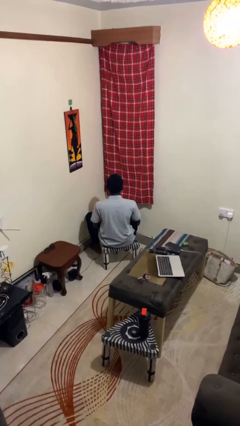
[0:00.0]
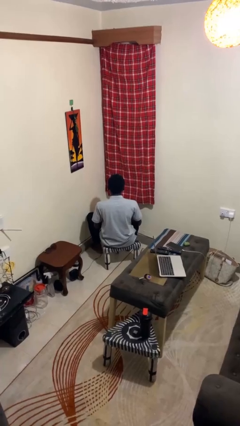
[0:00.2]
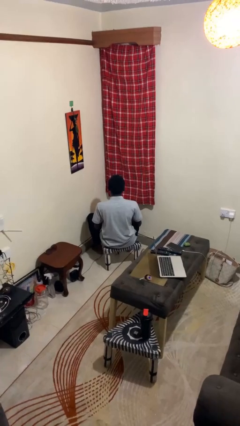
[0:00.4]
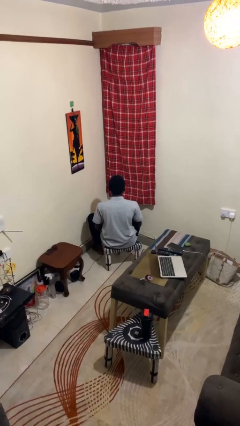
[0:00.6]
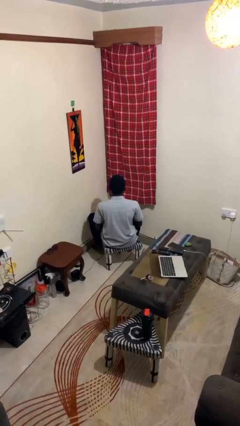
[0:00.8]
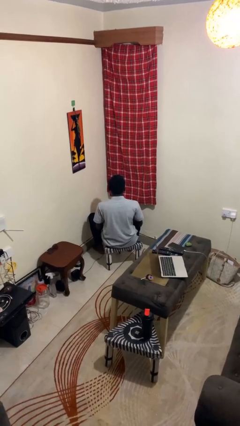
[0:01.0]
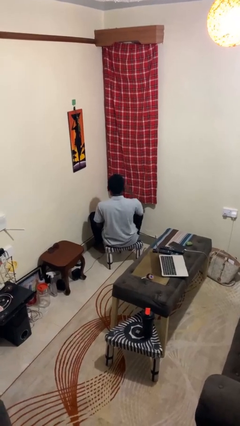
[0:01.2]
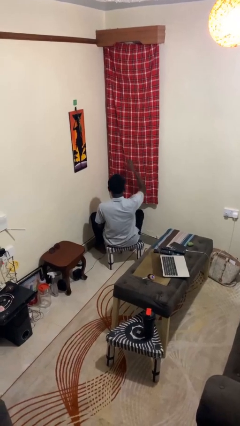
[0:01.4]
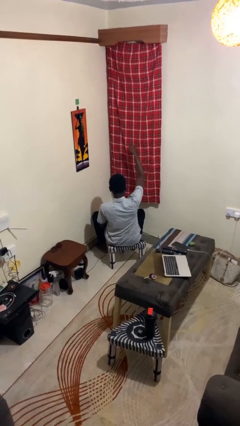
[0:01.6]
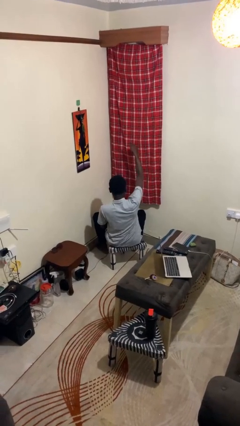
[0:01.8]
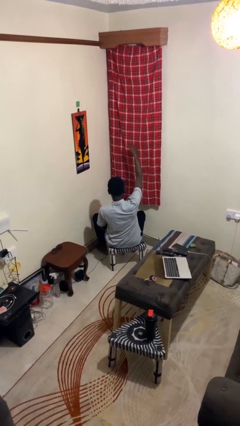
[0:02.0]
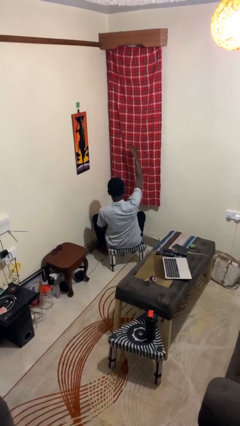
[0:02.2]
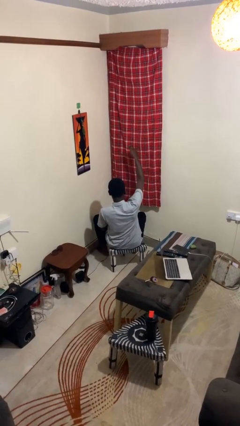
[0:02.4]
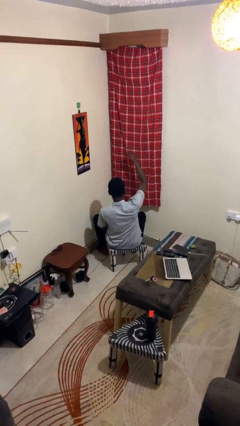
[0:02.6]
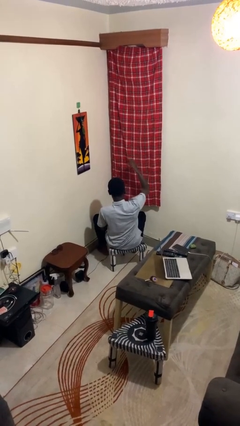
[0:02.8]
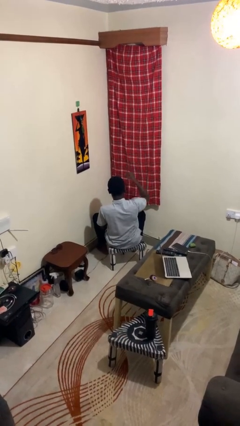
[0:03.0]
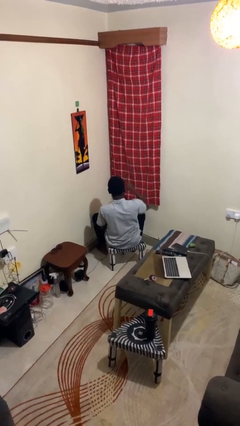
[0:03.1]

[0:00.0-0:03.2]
person gestures thumbs up

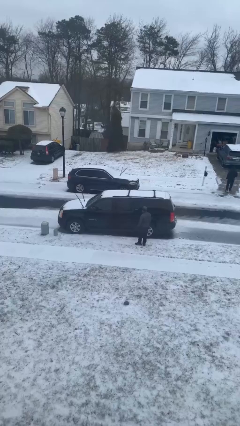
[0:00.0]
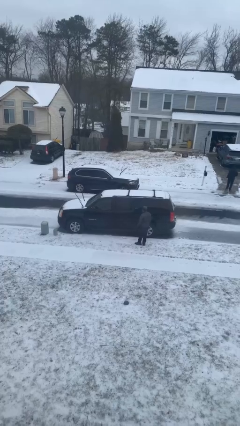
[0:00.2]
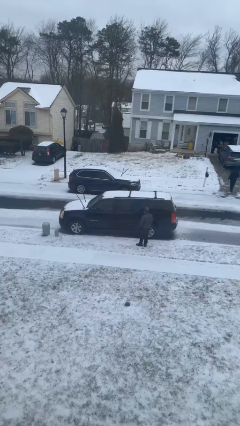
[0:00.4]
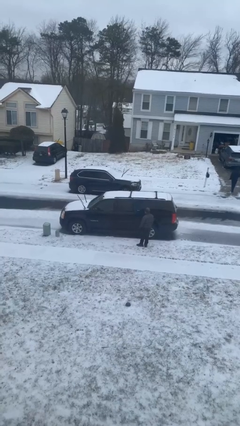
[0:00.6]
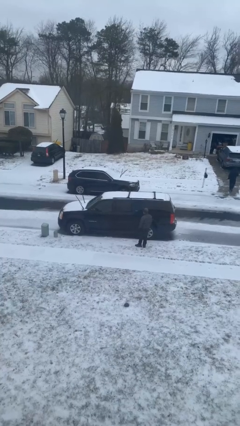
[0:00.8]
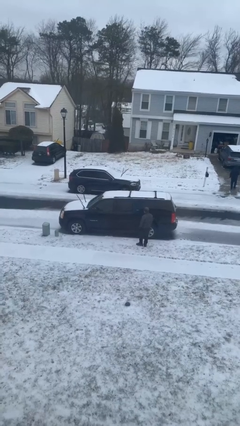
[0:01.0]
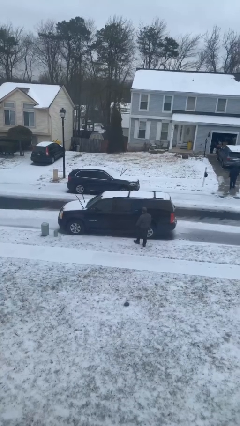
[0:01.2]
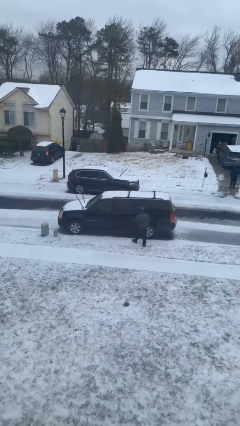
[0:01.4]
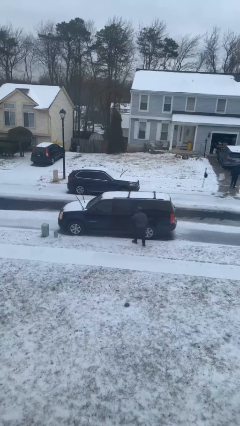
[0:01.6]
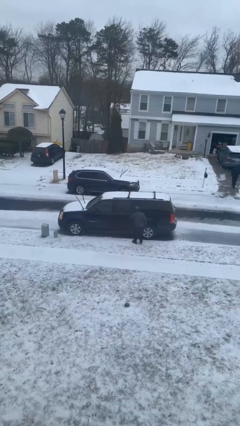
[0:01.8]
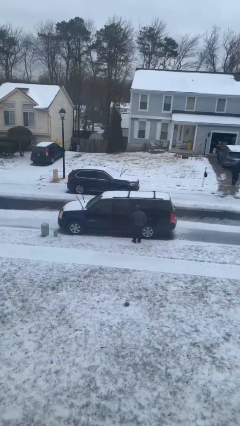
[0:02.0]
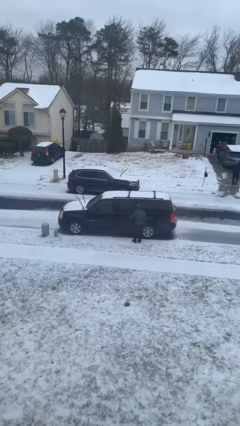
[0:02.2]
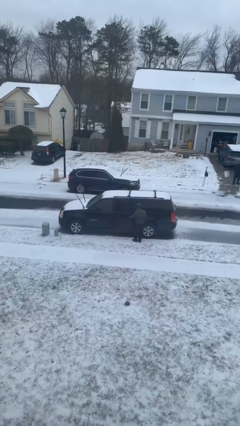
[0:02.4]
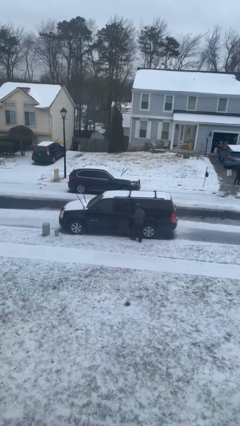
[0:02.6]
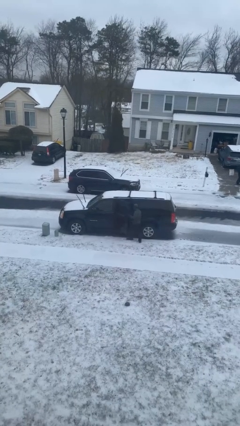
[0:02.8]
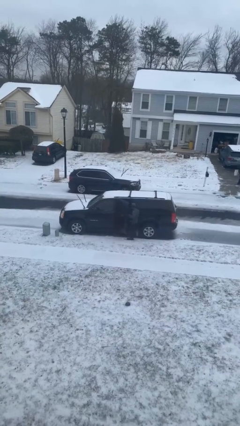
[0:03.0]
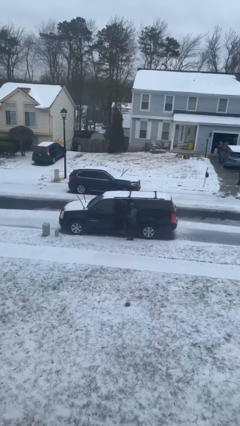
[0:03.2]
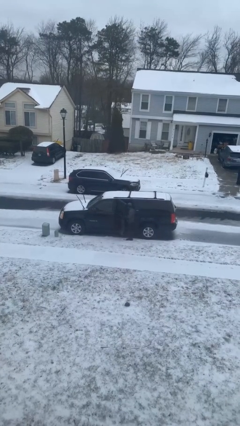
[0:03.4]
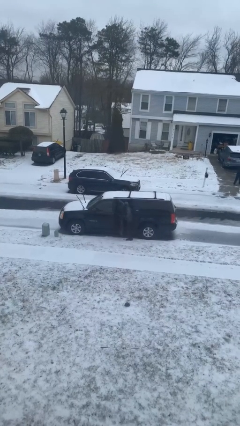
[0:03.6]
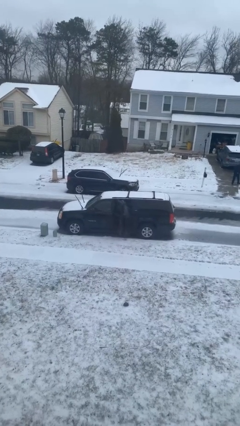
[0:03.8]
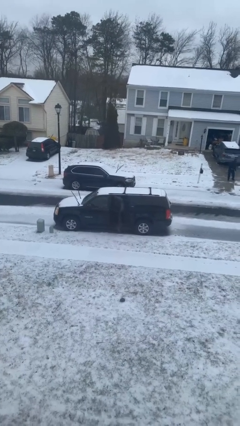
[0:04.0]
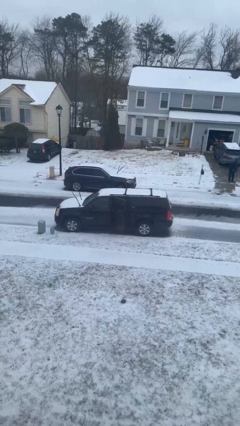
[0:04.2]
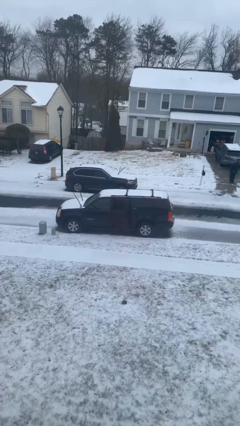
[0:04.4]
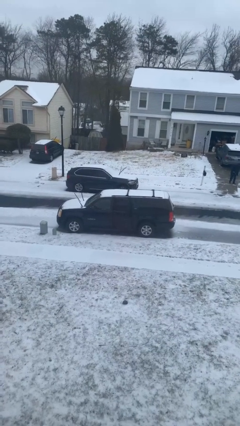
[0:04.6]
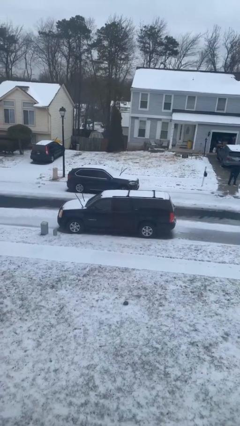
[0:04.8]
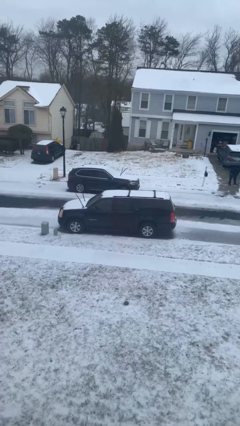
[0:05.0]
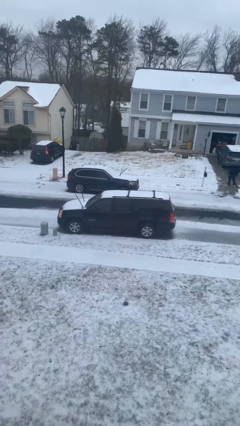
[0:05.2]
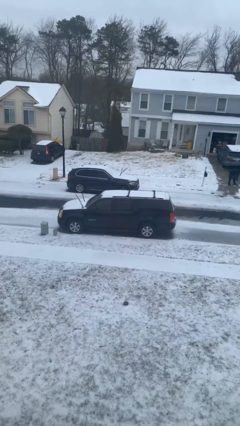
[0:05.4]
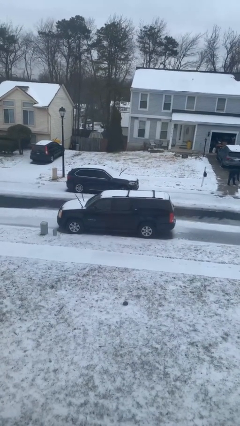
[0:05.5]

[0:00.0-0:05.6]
car picks up person

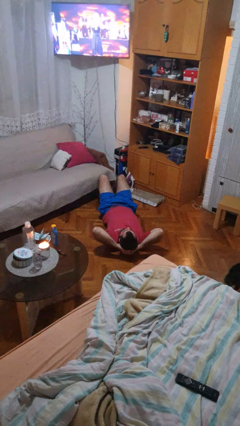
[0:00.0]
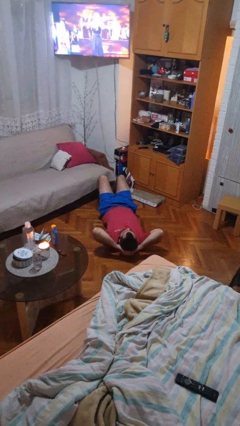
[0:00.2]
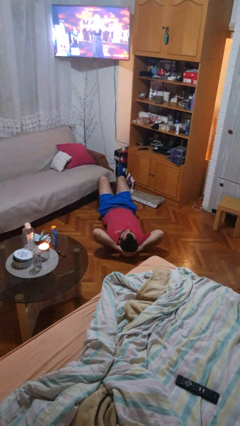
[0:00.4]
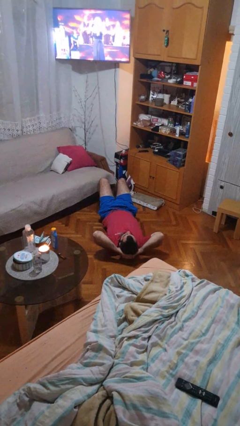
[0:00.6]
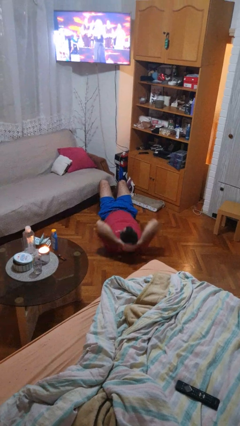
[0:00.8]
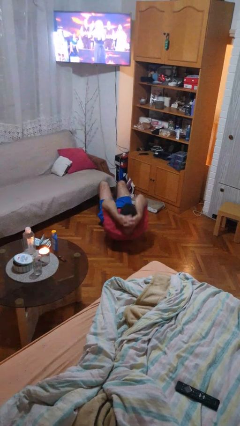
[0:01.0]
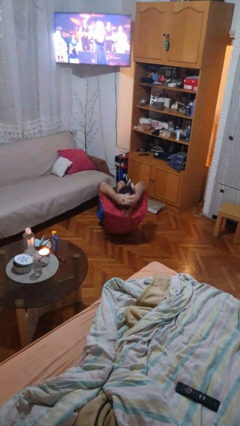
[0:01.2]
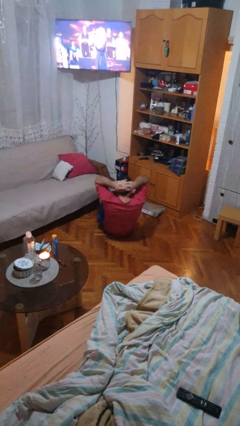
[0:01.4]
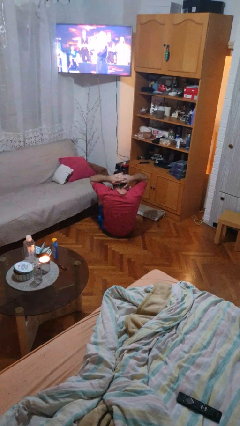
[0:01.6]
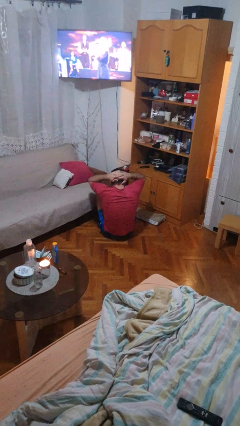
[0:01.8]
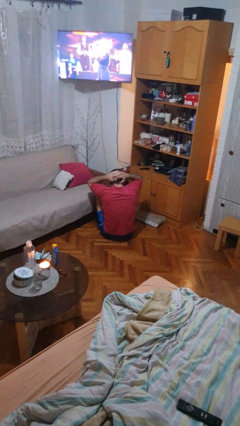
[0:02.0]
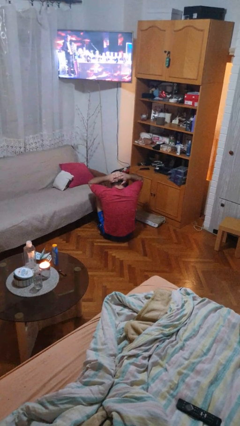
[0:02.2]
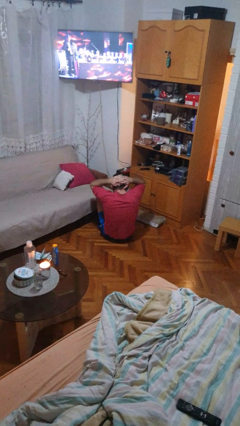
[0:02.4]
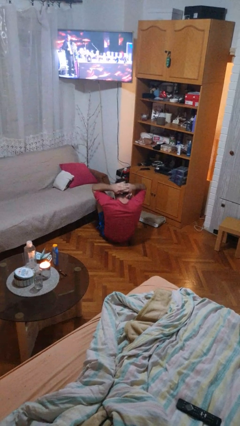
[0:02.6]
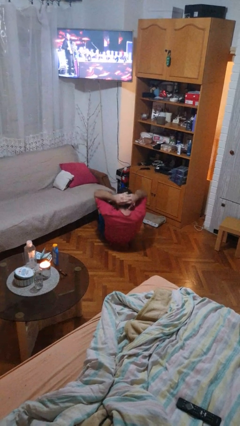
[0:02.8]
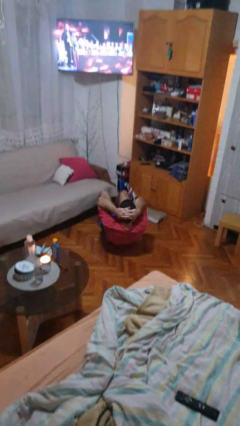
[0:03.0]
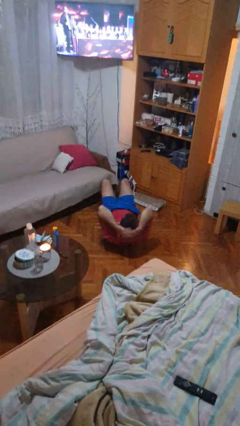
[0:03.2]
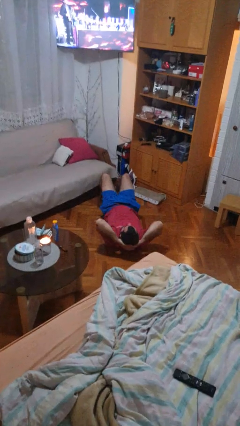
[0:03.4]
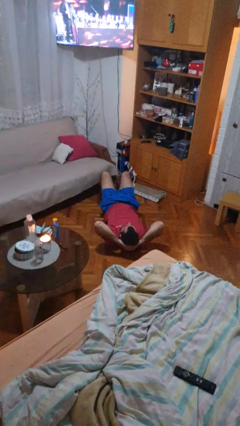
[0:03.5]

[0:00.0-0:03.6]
person exercises with situp

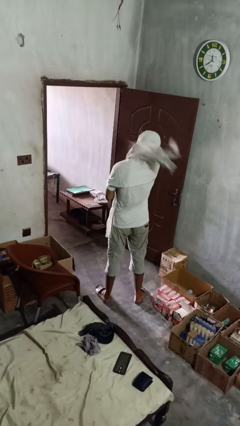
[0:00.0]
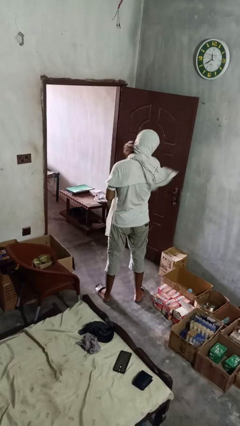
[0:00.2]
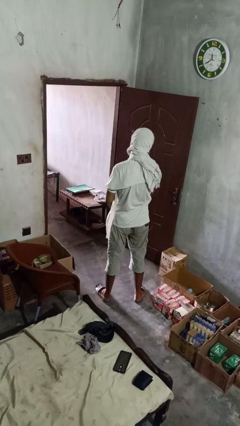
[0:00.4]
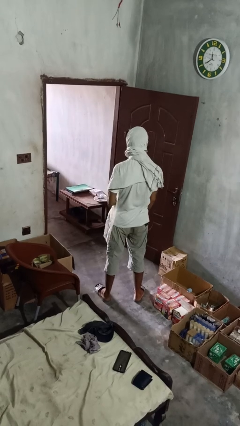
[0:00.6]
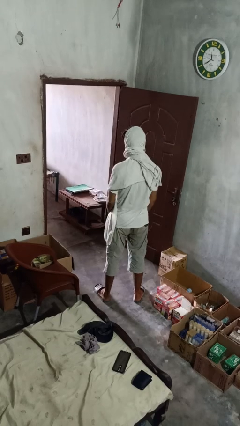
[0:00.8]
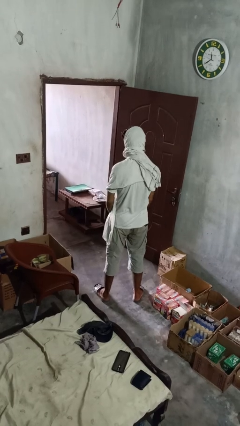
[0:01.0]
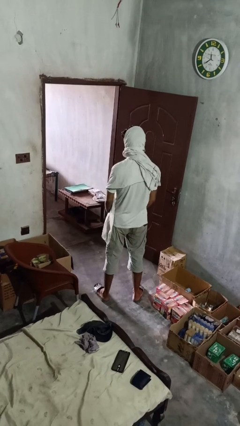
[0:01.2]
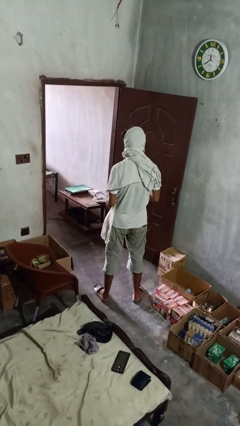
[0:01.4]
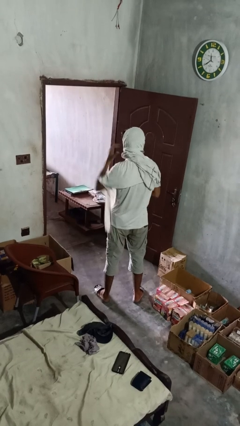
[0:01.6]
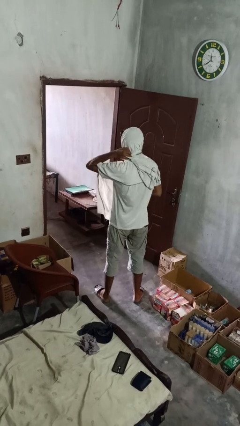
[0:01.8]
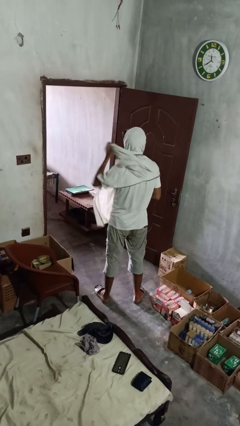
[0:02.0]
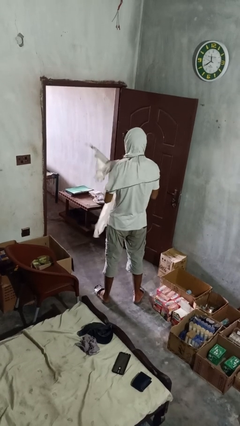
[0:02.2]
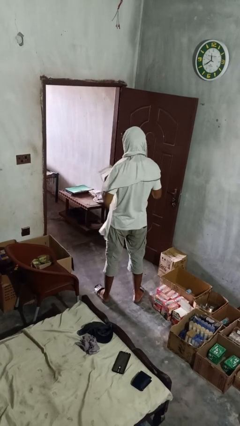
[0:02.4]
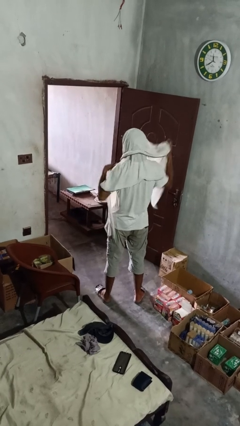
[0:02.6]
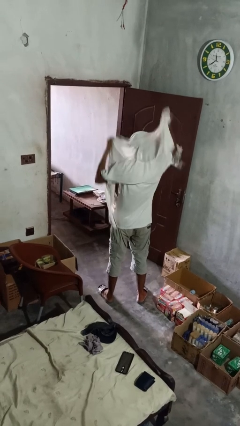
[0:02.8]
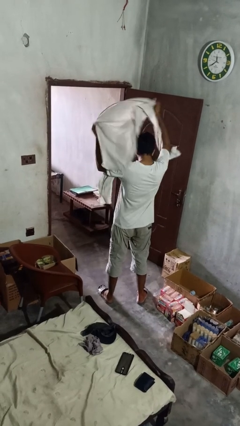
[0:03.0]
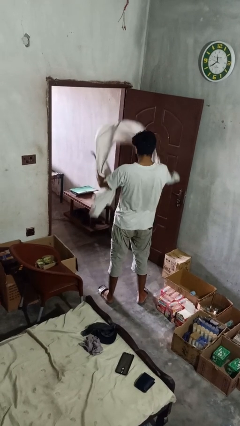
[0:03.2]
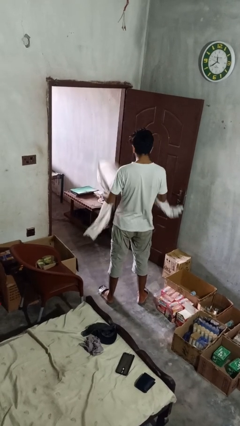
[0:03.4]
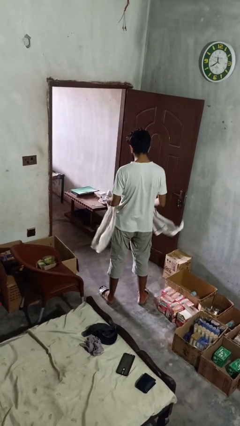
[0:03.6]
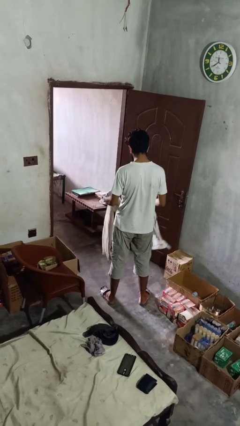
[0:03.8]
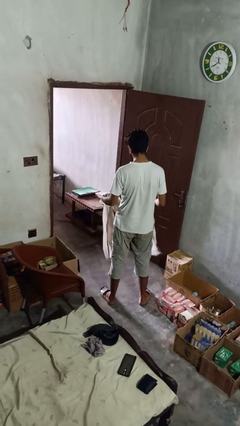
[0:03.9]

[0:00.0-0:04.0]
person takes off scarf

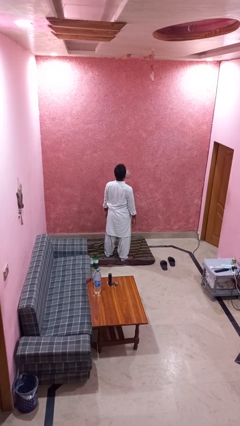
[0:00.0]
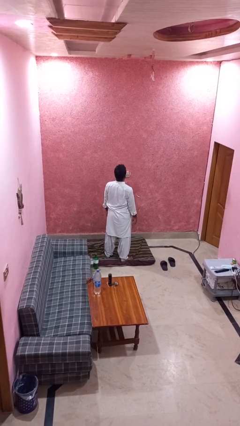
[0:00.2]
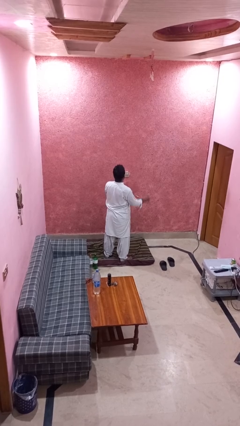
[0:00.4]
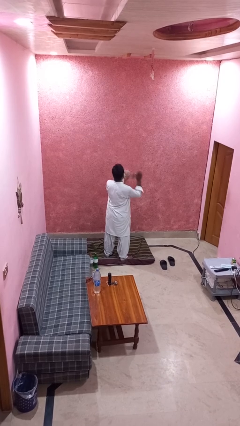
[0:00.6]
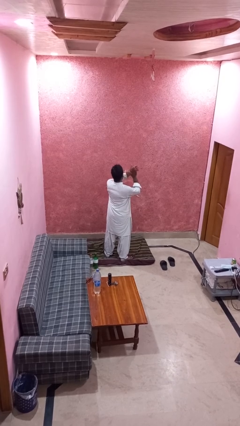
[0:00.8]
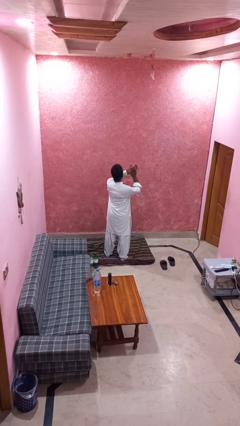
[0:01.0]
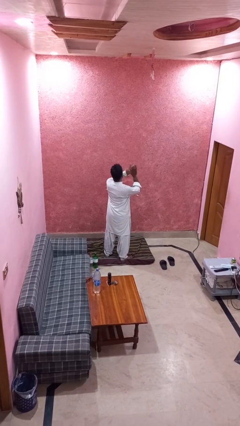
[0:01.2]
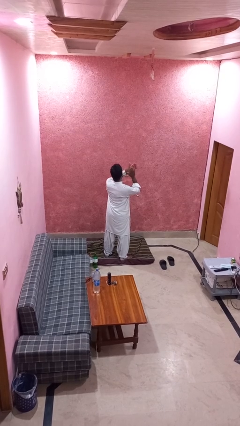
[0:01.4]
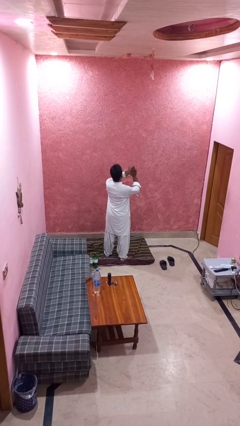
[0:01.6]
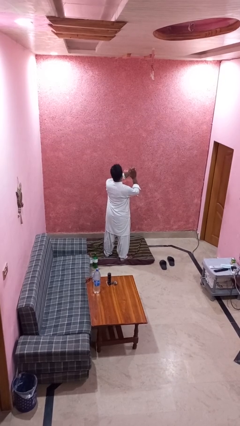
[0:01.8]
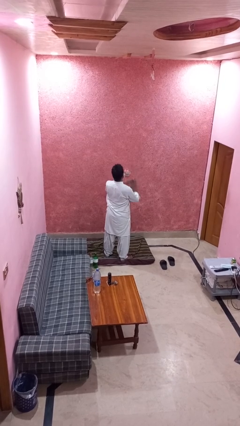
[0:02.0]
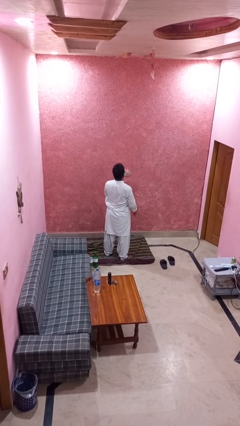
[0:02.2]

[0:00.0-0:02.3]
person claps hands
